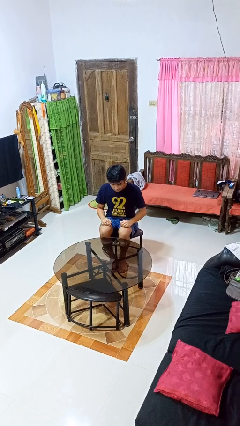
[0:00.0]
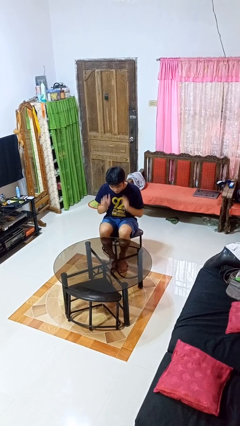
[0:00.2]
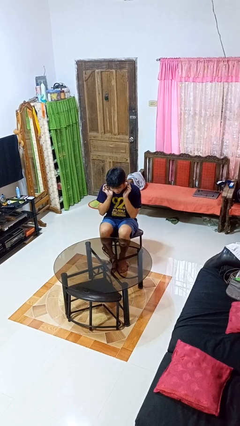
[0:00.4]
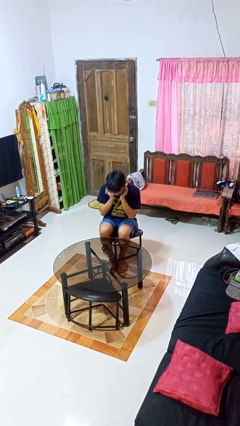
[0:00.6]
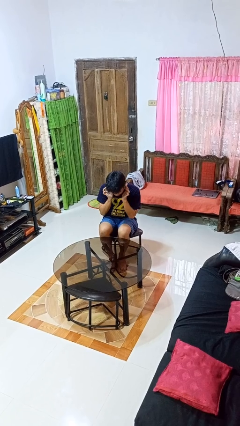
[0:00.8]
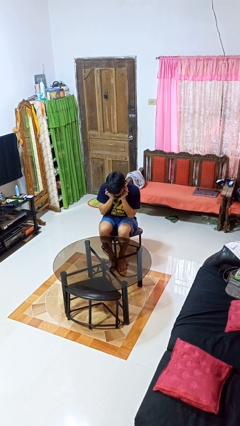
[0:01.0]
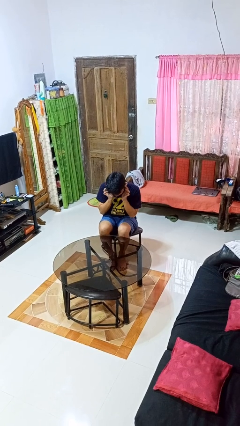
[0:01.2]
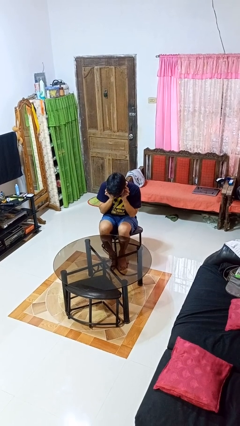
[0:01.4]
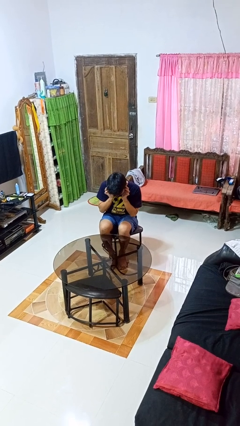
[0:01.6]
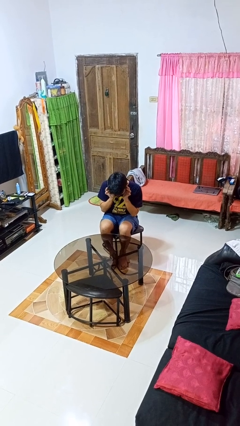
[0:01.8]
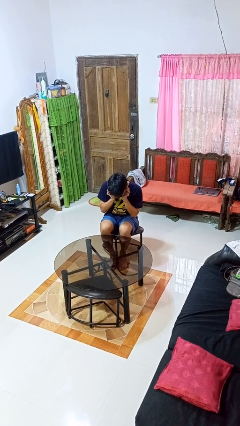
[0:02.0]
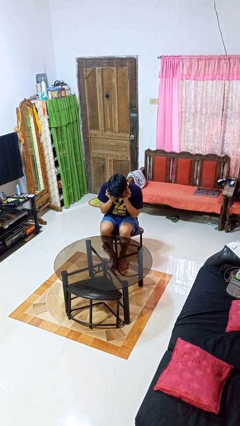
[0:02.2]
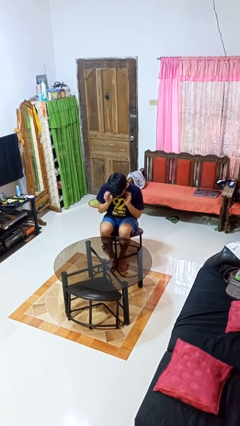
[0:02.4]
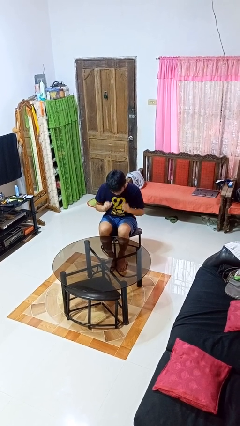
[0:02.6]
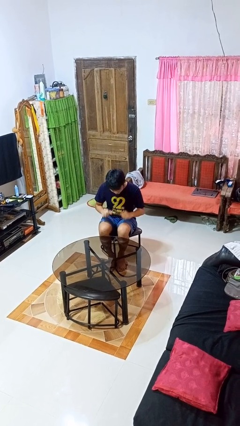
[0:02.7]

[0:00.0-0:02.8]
person puts fingers in ear

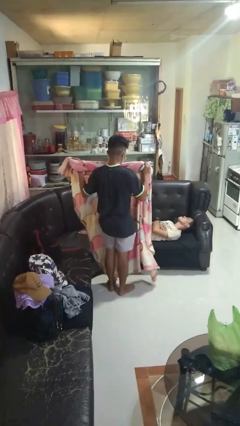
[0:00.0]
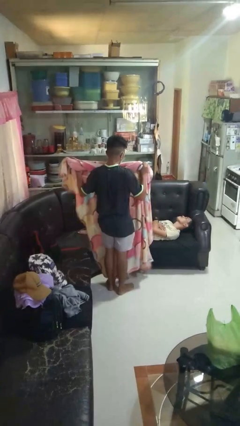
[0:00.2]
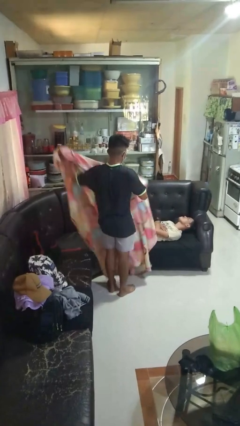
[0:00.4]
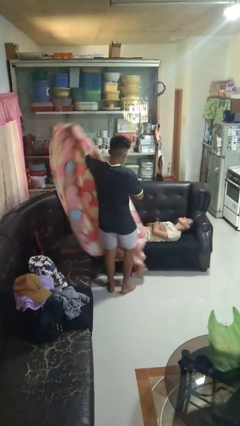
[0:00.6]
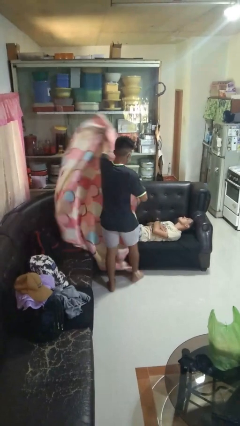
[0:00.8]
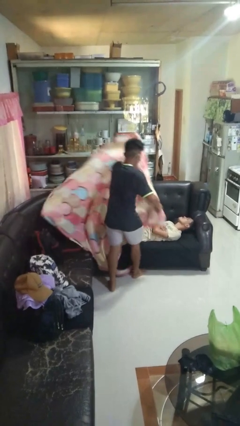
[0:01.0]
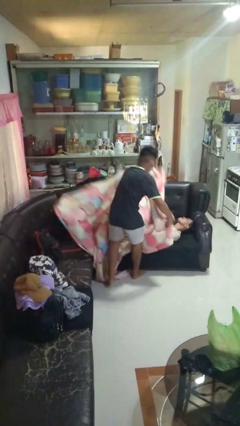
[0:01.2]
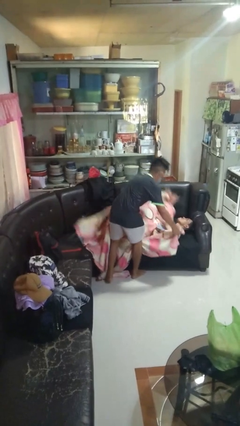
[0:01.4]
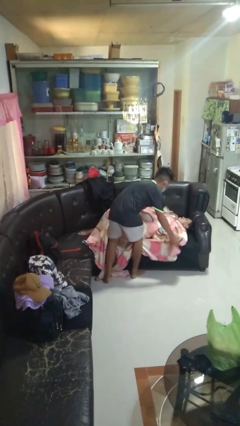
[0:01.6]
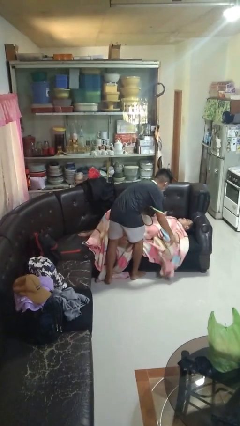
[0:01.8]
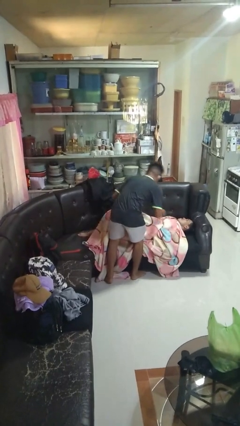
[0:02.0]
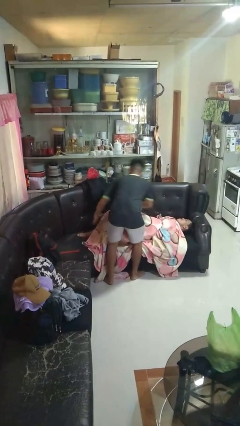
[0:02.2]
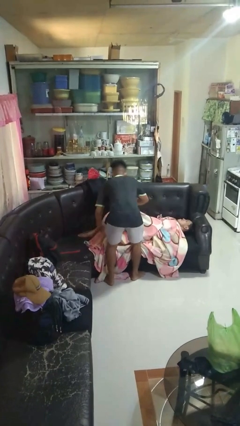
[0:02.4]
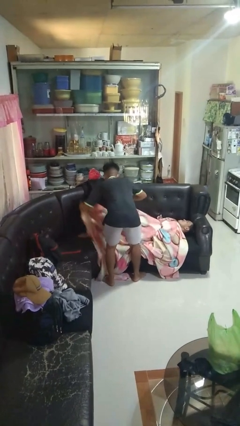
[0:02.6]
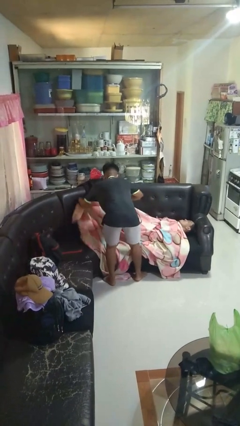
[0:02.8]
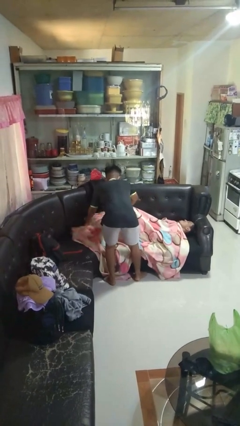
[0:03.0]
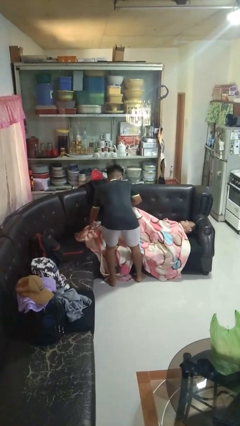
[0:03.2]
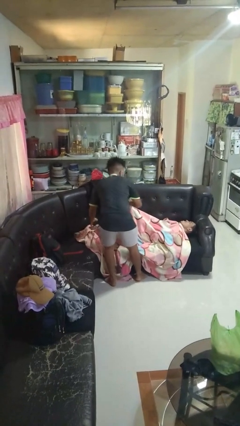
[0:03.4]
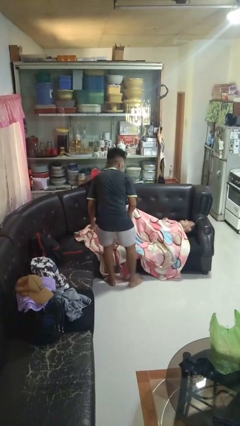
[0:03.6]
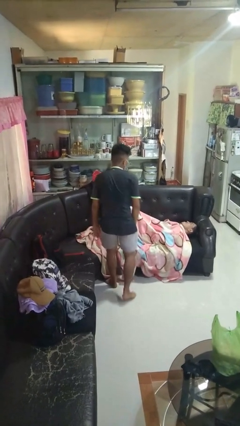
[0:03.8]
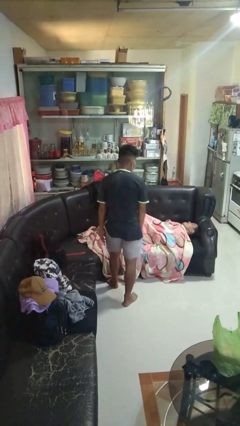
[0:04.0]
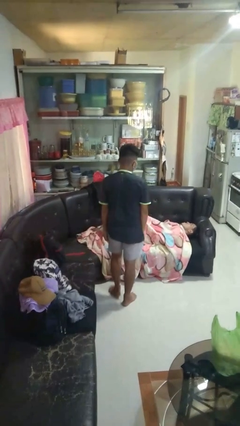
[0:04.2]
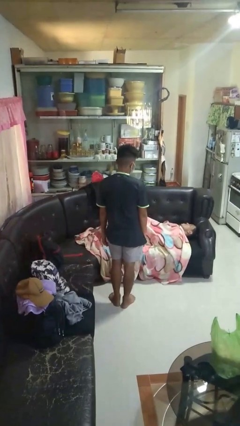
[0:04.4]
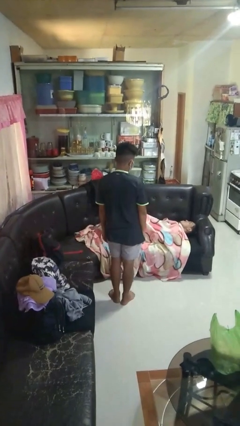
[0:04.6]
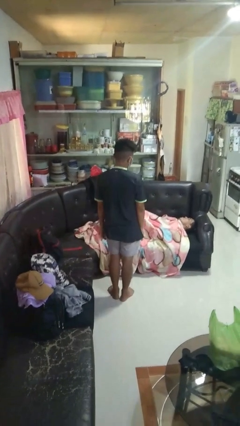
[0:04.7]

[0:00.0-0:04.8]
person covers friend with blanket

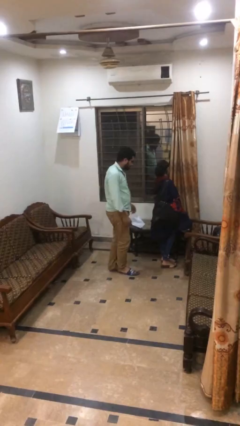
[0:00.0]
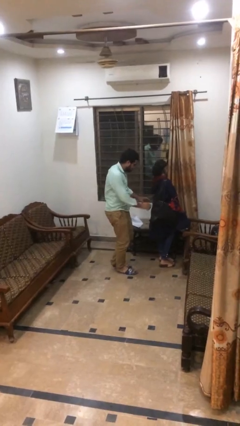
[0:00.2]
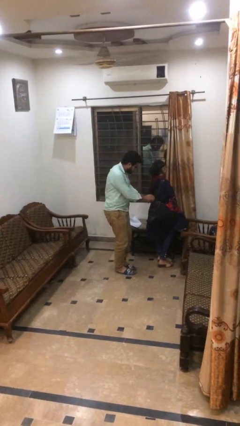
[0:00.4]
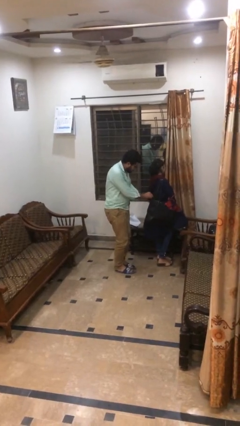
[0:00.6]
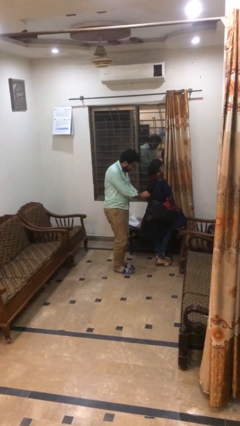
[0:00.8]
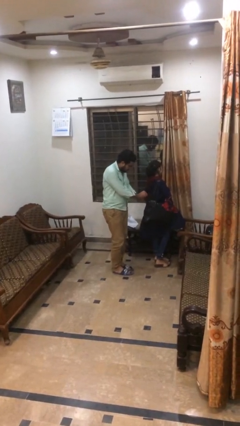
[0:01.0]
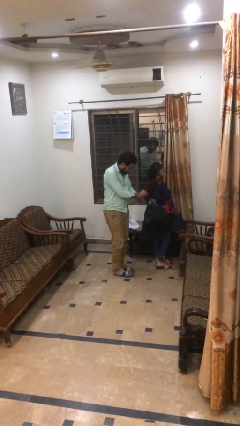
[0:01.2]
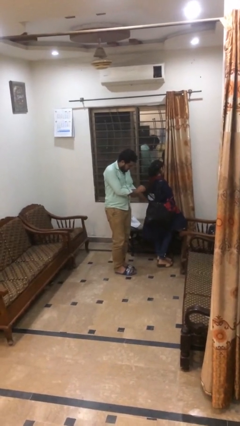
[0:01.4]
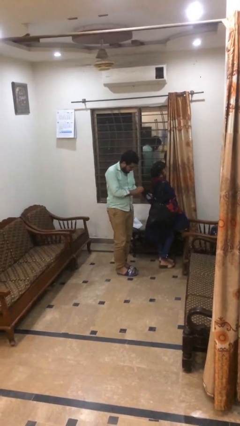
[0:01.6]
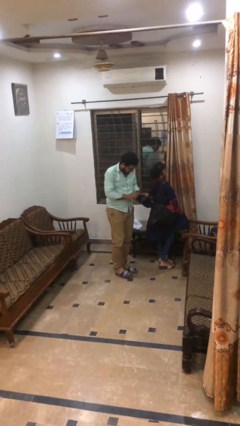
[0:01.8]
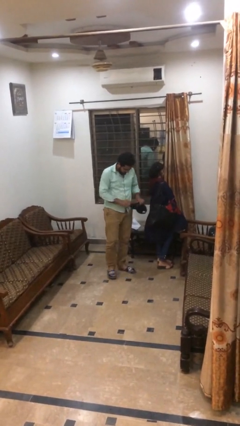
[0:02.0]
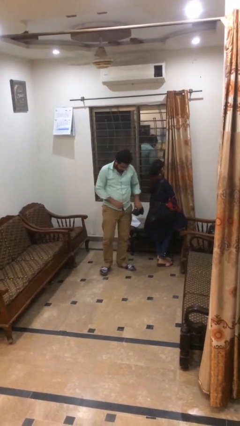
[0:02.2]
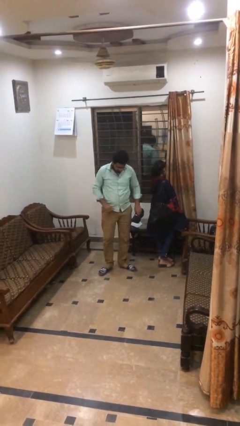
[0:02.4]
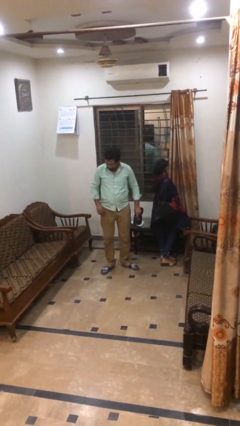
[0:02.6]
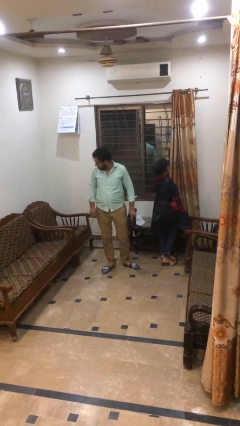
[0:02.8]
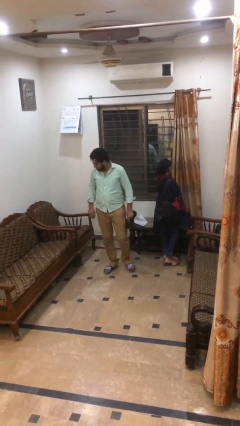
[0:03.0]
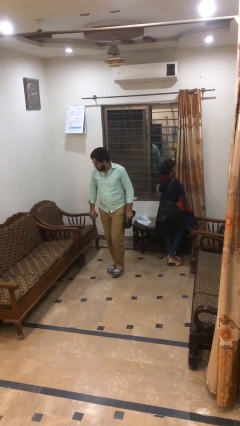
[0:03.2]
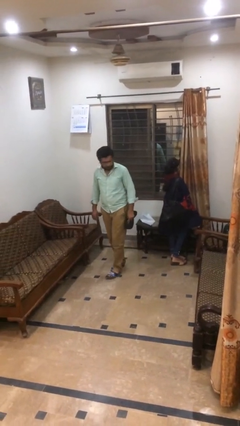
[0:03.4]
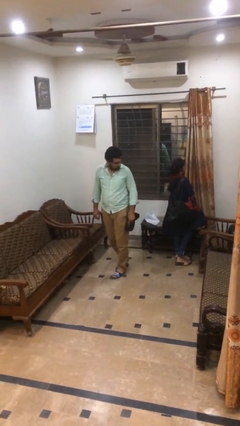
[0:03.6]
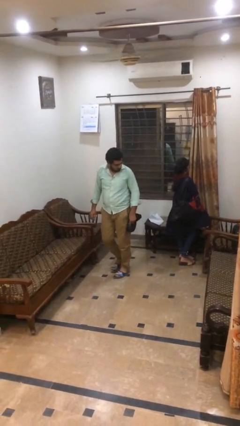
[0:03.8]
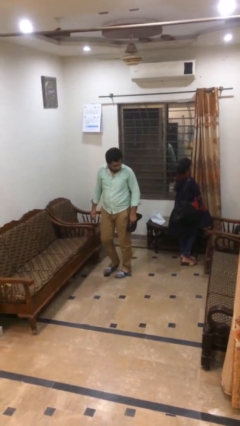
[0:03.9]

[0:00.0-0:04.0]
person steals object from person

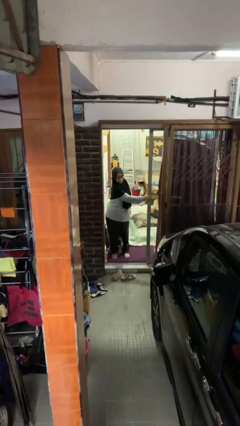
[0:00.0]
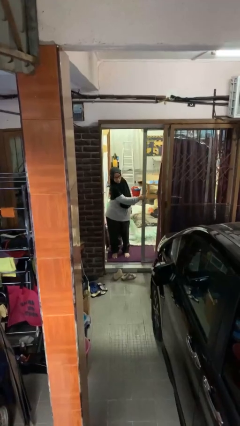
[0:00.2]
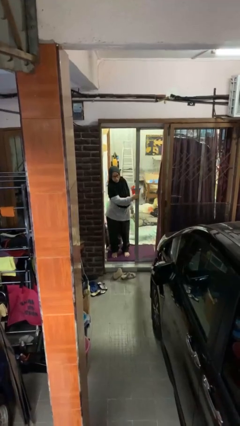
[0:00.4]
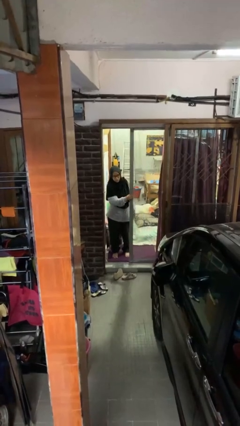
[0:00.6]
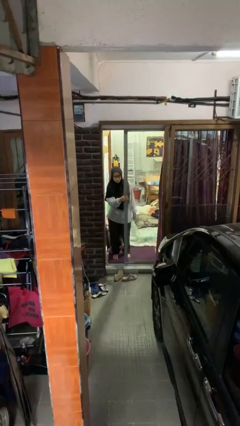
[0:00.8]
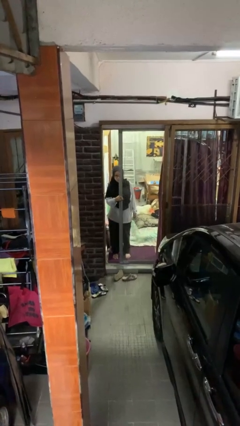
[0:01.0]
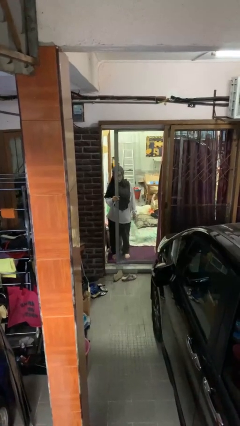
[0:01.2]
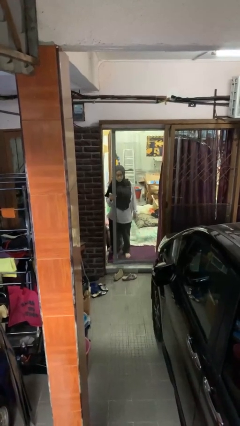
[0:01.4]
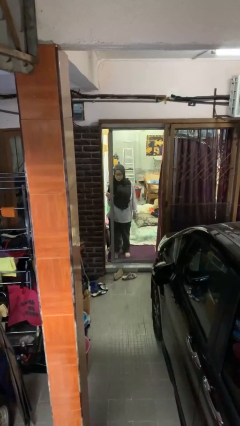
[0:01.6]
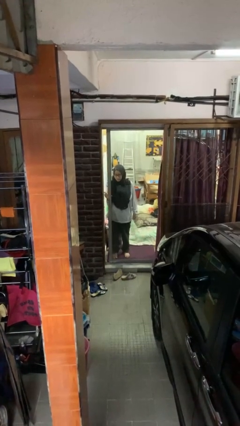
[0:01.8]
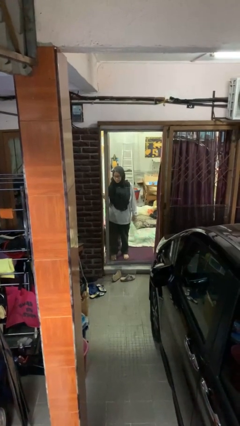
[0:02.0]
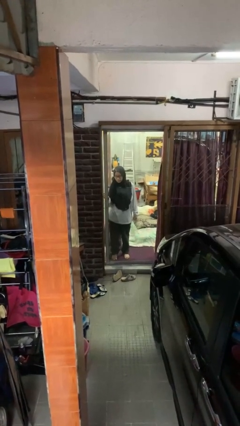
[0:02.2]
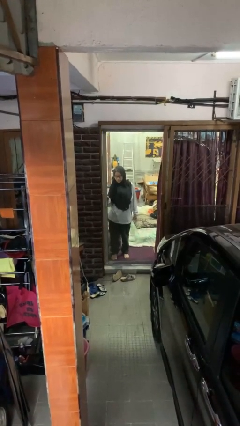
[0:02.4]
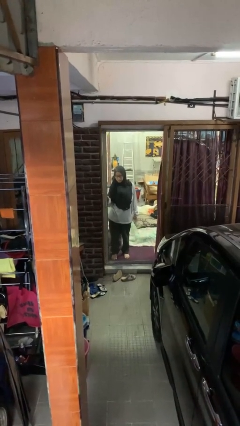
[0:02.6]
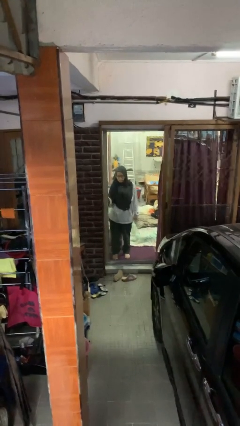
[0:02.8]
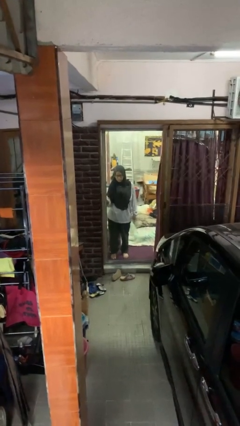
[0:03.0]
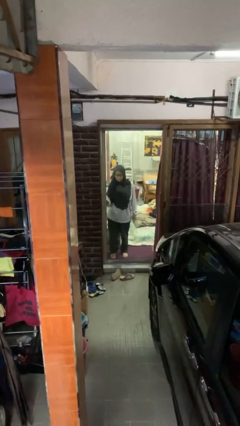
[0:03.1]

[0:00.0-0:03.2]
person closes sliding door

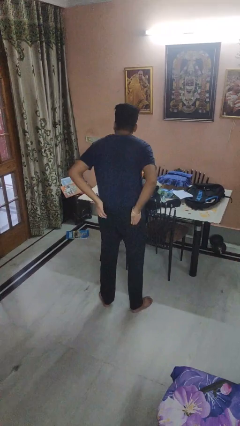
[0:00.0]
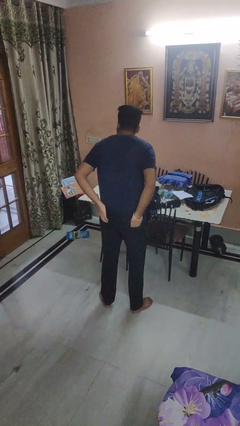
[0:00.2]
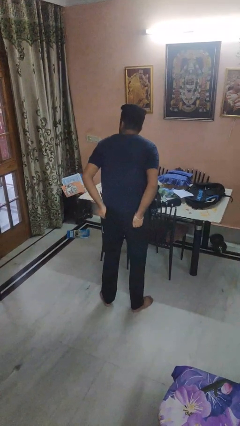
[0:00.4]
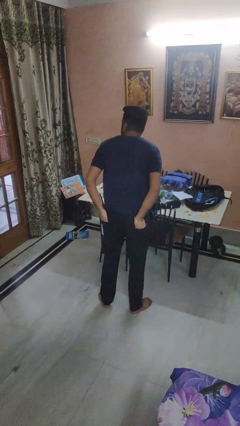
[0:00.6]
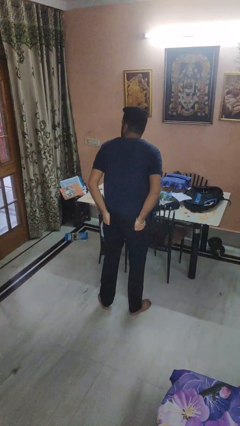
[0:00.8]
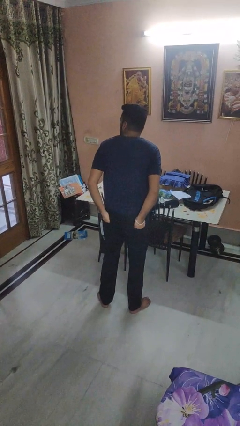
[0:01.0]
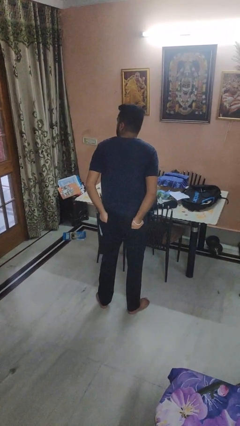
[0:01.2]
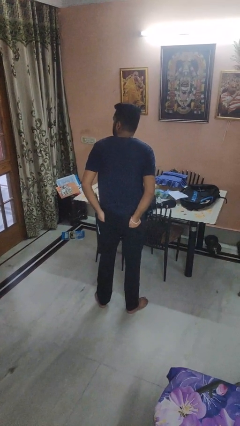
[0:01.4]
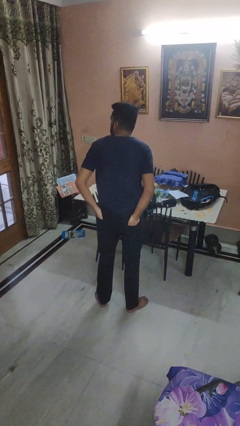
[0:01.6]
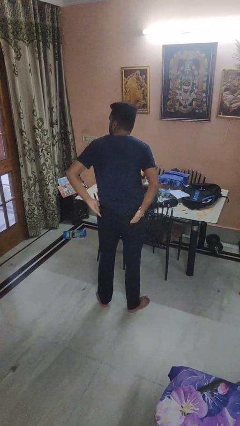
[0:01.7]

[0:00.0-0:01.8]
person puts hands in back pockets

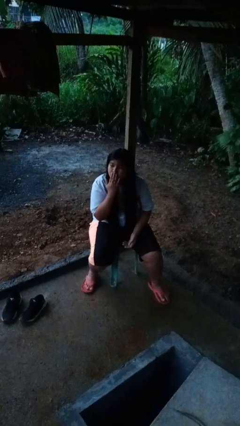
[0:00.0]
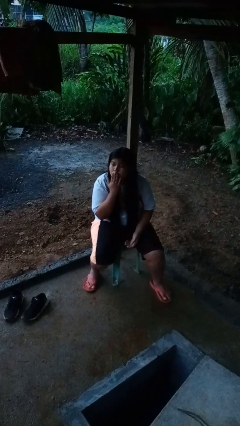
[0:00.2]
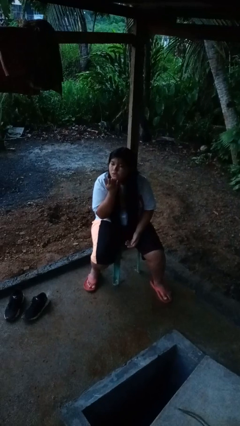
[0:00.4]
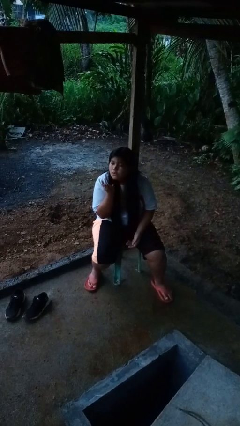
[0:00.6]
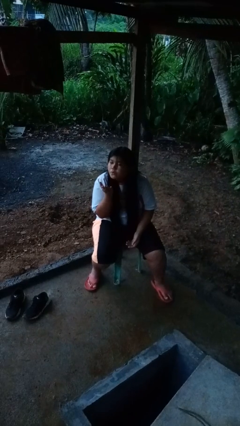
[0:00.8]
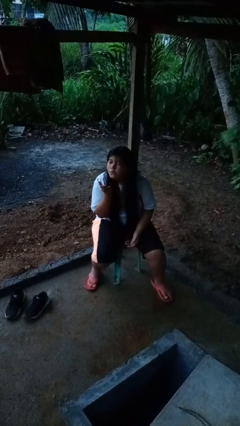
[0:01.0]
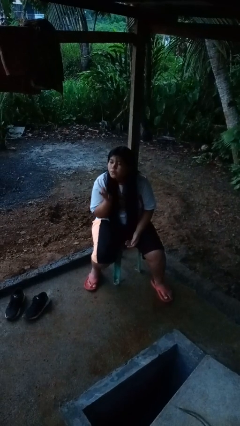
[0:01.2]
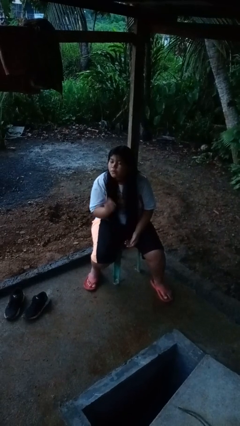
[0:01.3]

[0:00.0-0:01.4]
person gestures blow kiss
